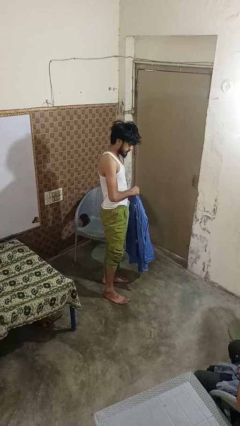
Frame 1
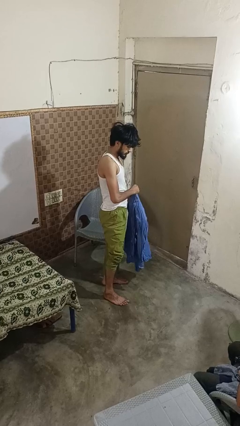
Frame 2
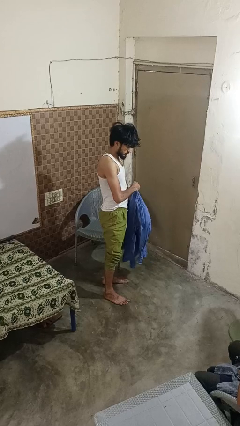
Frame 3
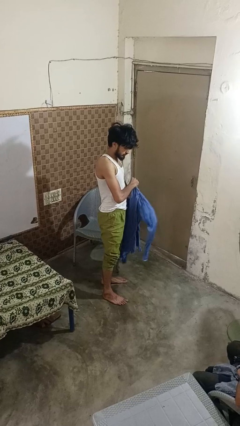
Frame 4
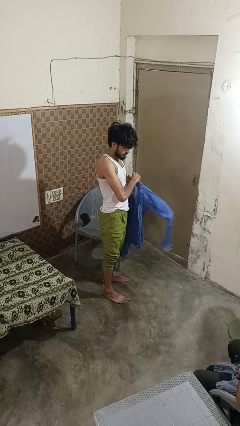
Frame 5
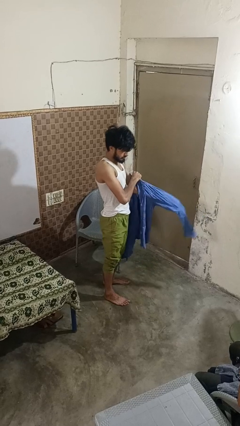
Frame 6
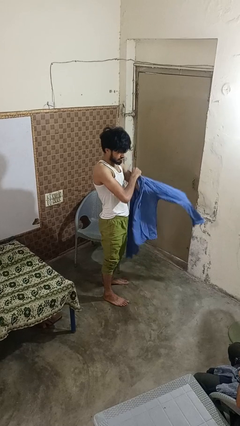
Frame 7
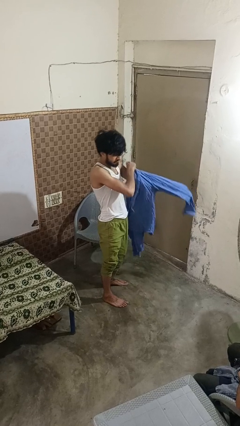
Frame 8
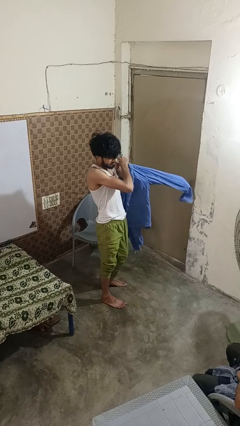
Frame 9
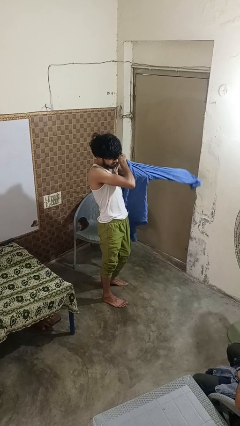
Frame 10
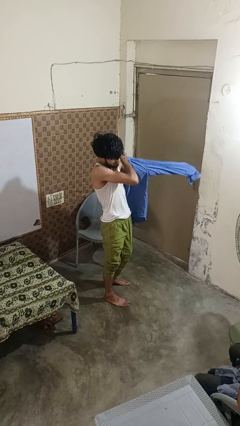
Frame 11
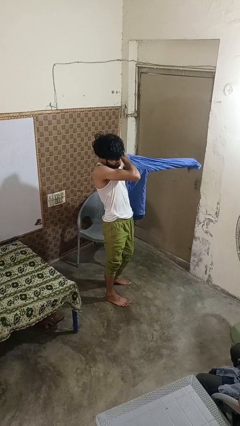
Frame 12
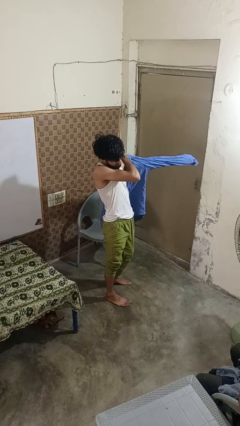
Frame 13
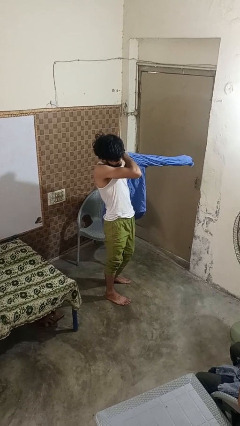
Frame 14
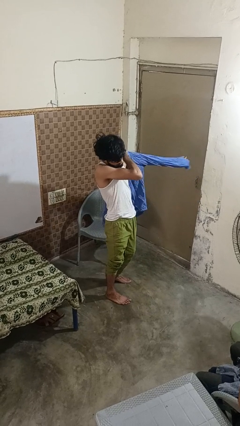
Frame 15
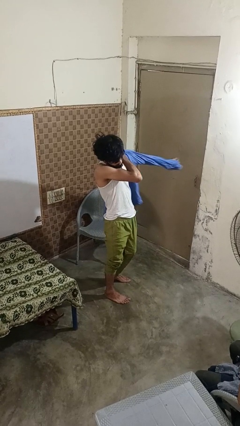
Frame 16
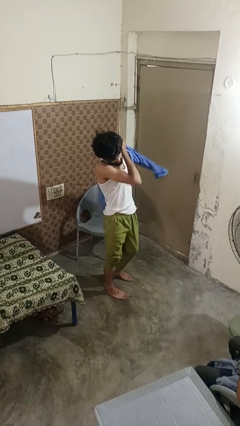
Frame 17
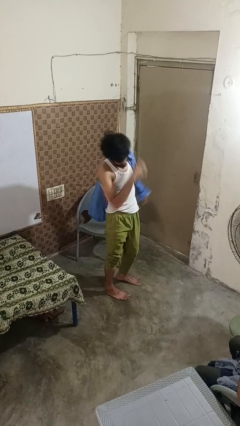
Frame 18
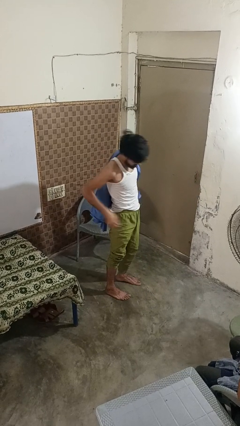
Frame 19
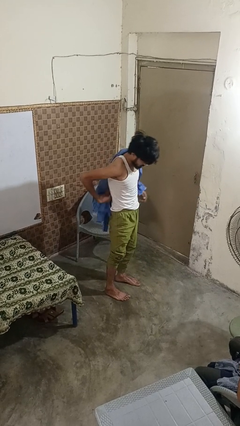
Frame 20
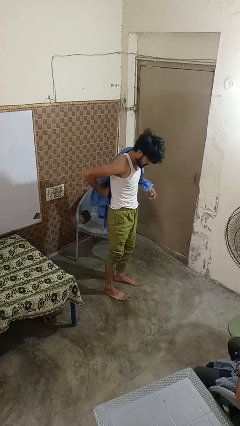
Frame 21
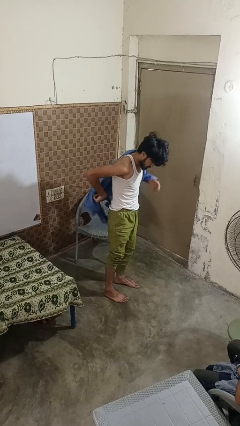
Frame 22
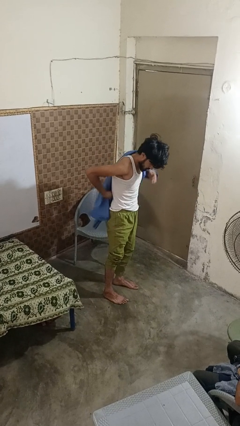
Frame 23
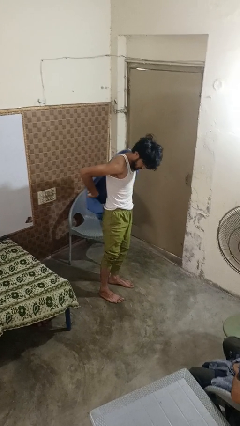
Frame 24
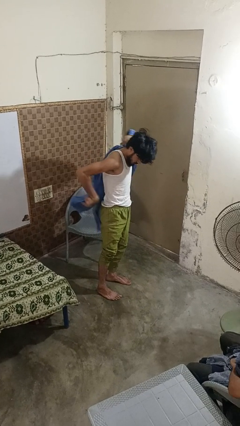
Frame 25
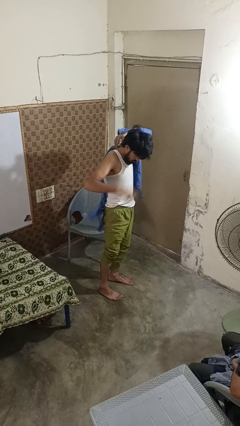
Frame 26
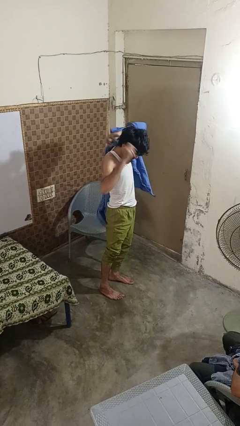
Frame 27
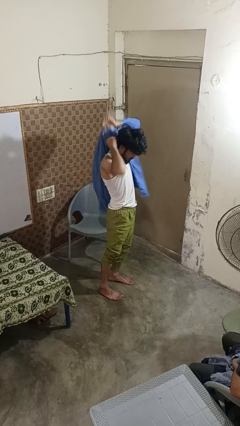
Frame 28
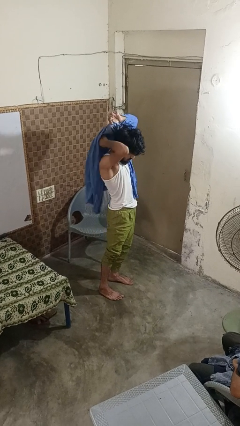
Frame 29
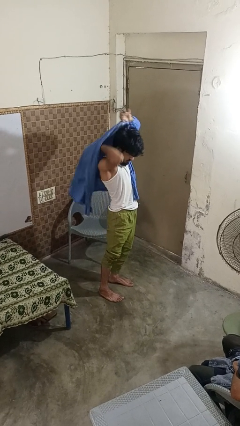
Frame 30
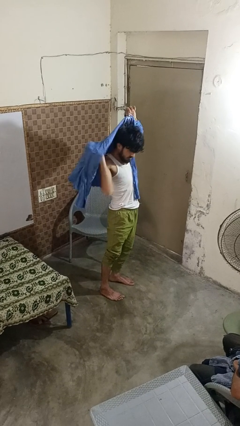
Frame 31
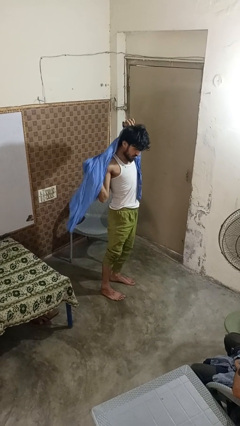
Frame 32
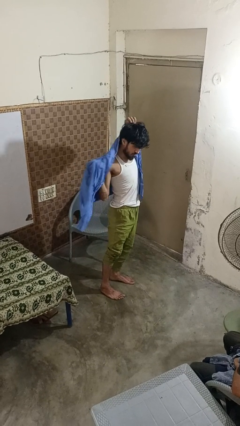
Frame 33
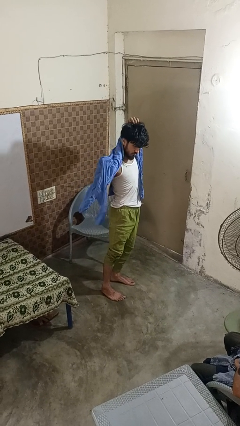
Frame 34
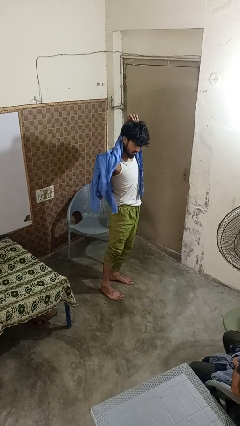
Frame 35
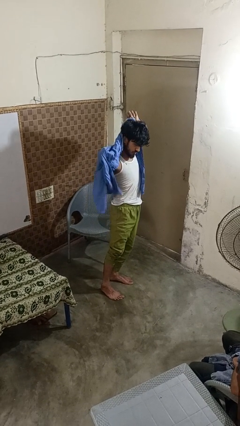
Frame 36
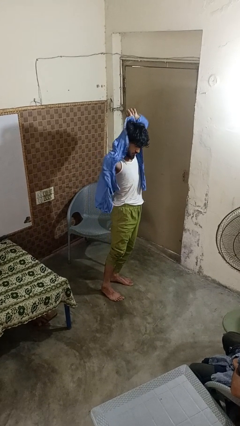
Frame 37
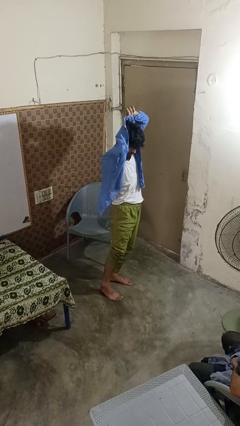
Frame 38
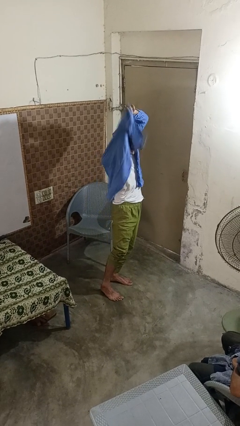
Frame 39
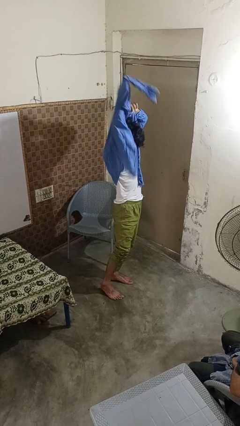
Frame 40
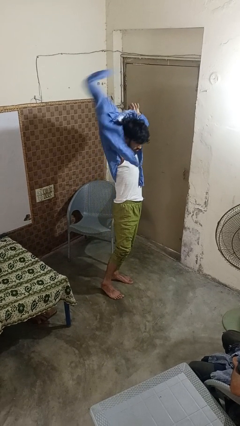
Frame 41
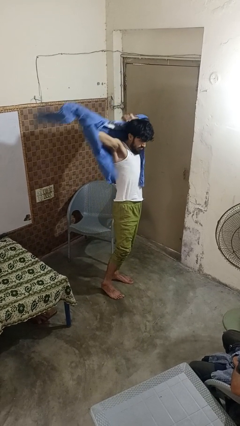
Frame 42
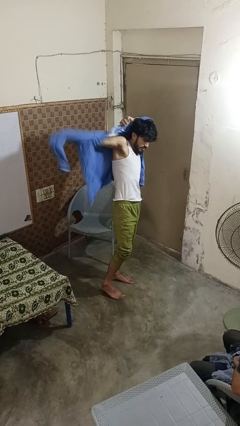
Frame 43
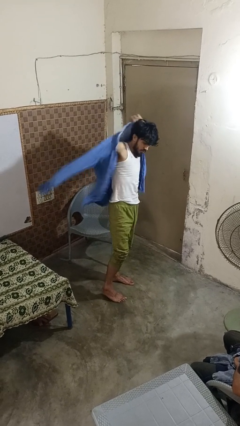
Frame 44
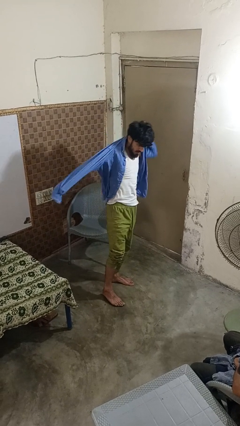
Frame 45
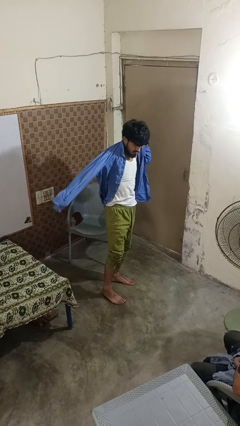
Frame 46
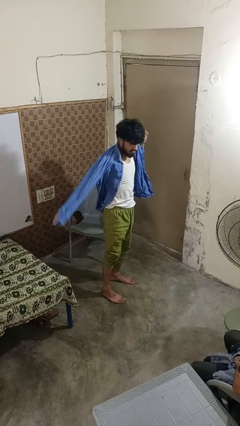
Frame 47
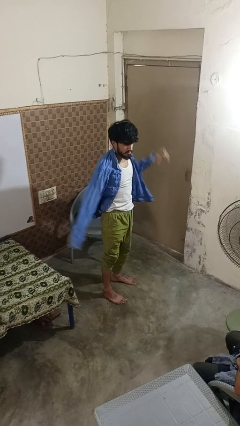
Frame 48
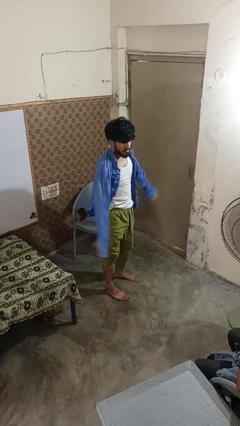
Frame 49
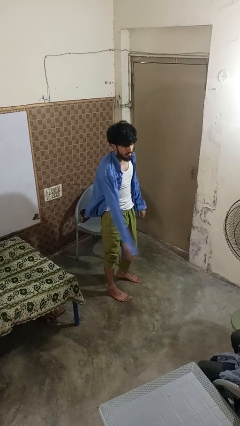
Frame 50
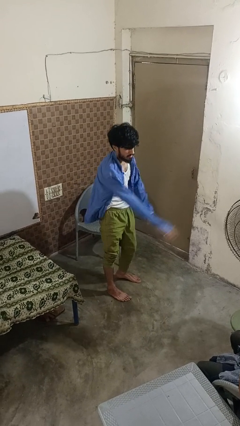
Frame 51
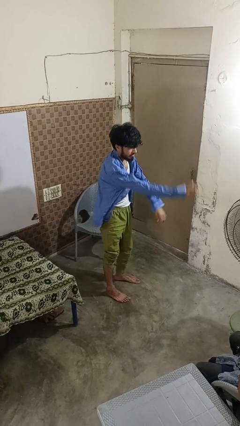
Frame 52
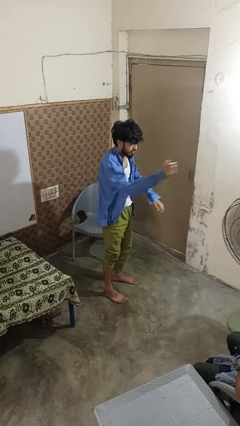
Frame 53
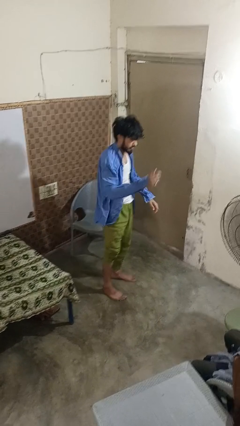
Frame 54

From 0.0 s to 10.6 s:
person puts on shirt

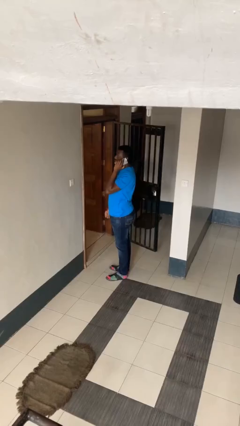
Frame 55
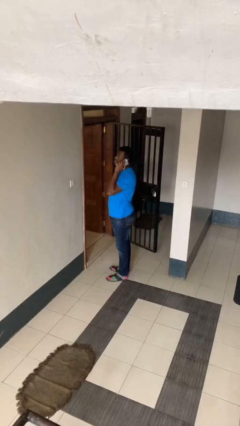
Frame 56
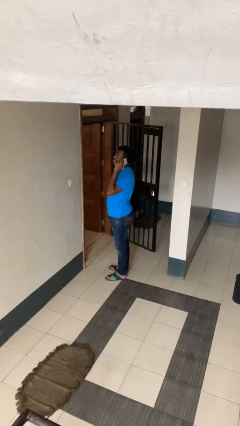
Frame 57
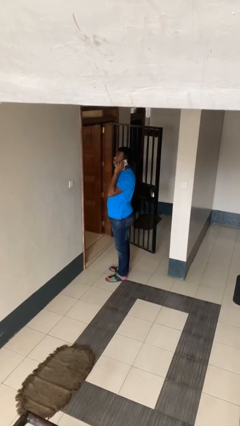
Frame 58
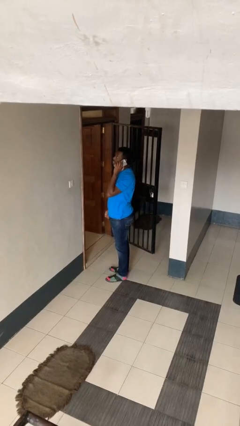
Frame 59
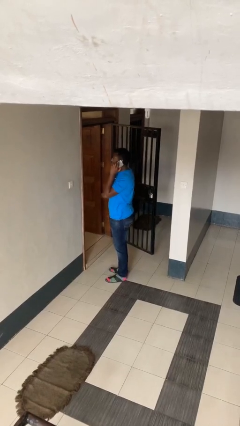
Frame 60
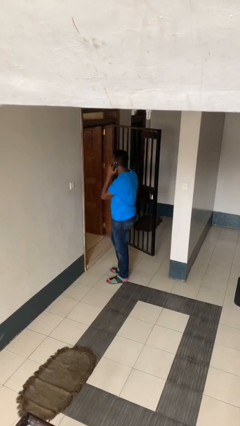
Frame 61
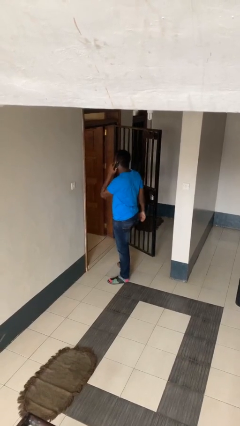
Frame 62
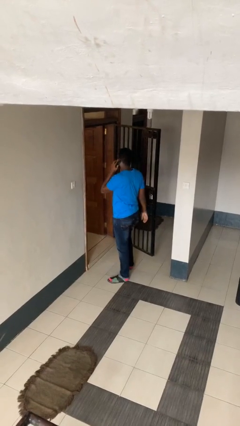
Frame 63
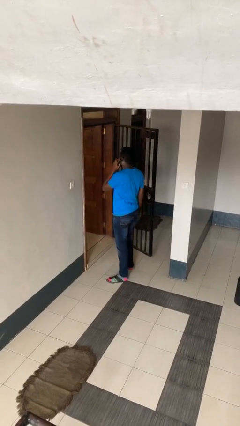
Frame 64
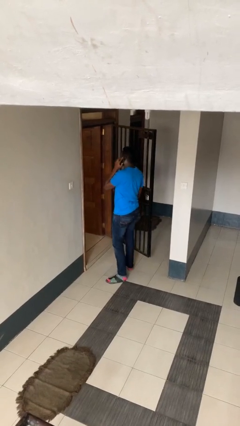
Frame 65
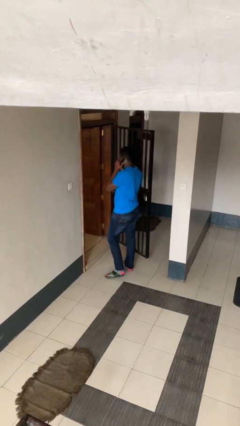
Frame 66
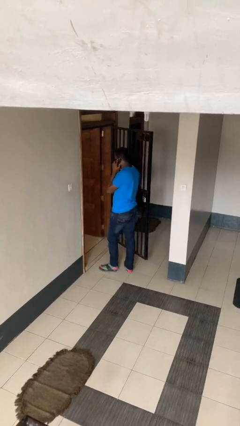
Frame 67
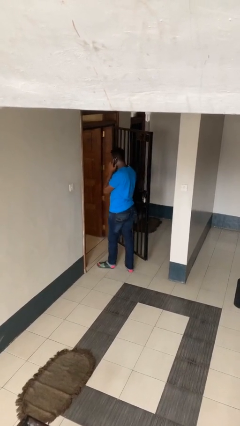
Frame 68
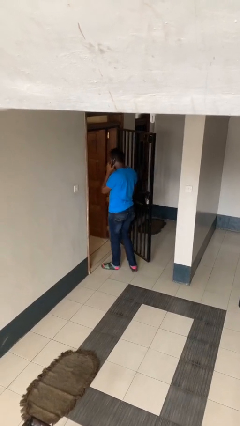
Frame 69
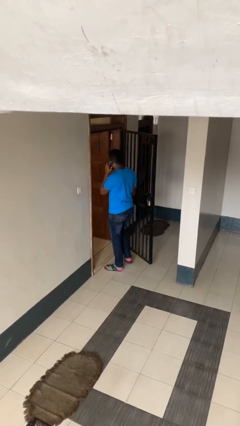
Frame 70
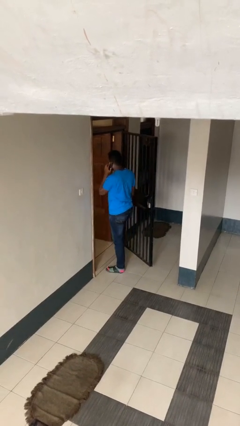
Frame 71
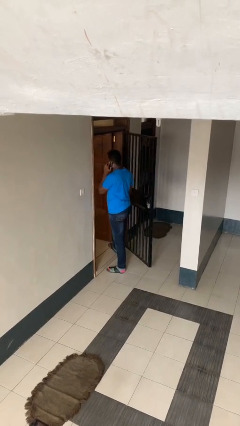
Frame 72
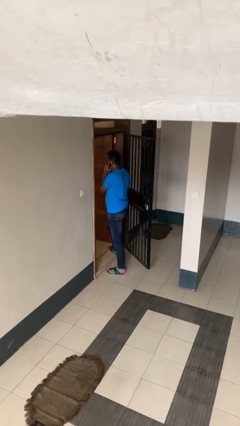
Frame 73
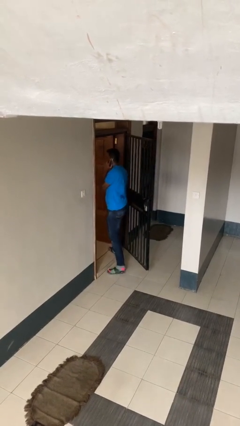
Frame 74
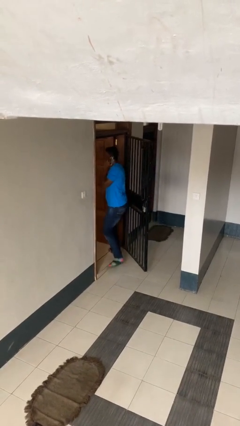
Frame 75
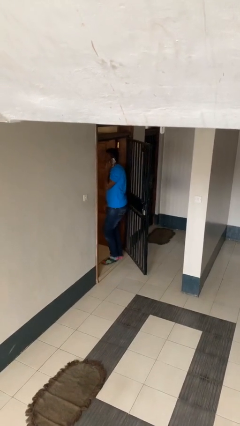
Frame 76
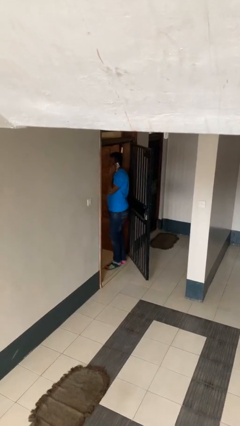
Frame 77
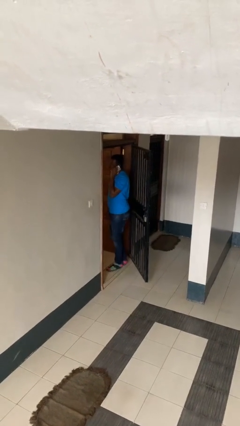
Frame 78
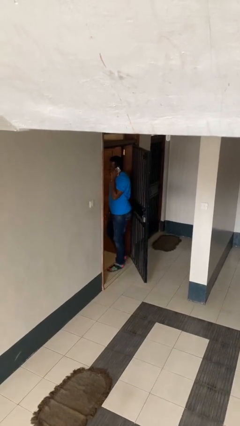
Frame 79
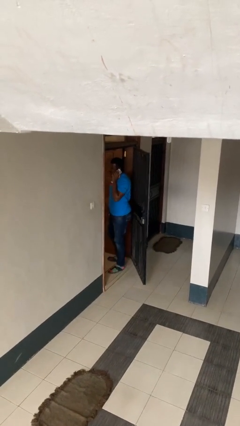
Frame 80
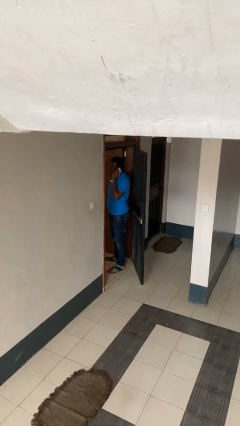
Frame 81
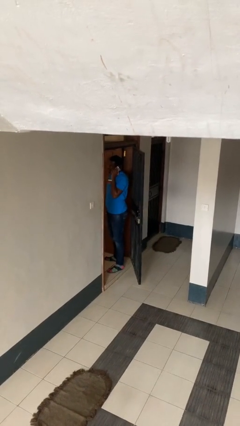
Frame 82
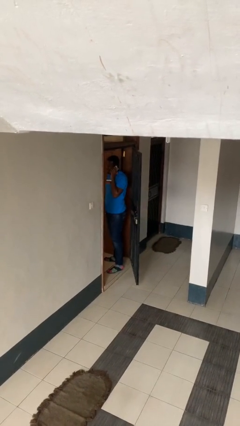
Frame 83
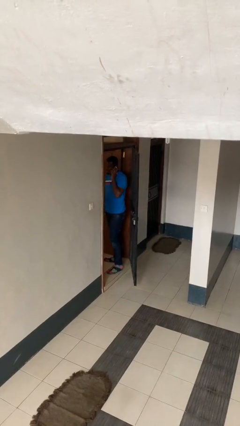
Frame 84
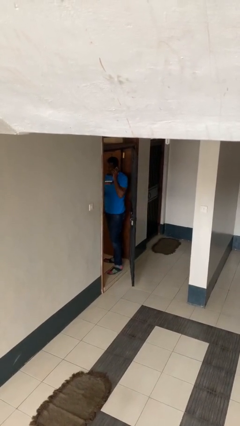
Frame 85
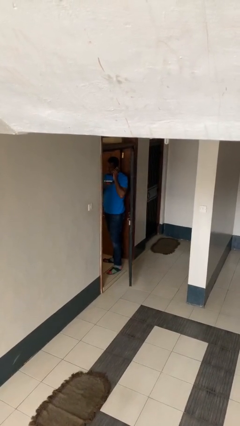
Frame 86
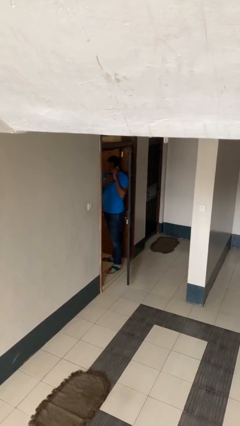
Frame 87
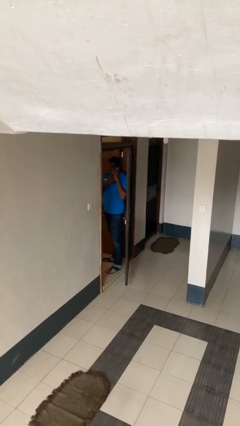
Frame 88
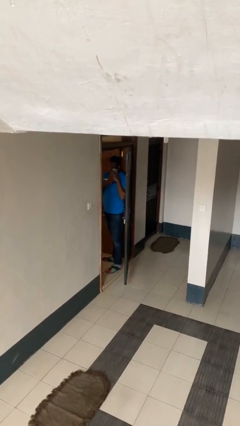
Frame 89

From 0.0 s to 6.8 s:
person exits scene through structure

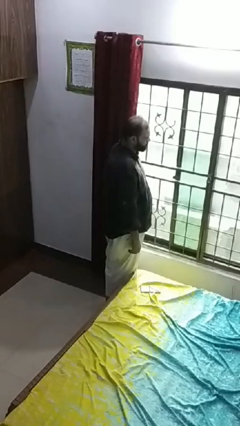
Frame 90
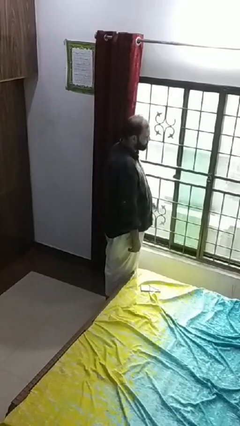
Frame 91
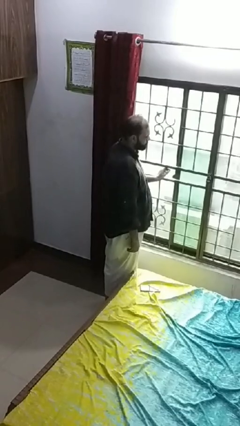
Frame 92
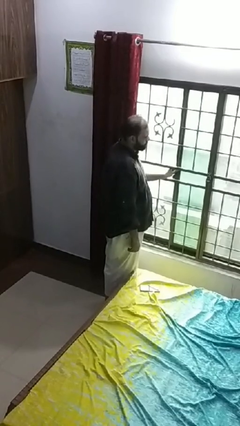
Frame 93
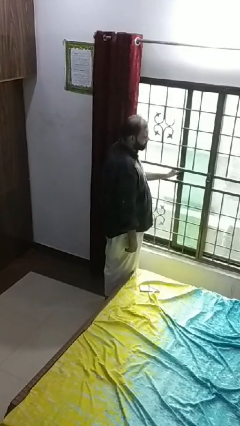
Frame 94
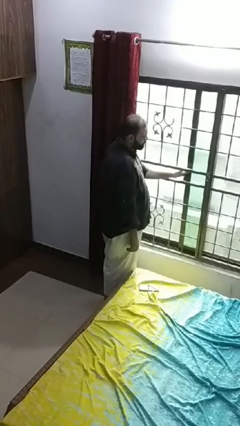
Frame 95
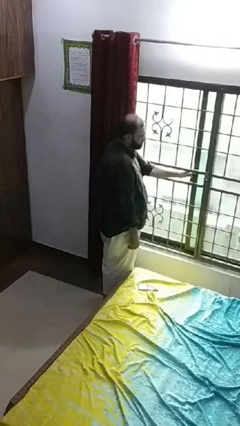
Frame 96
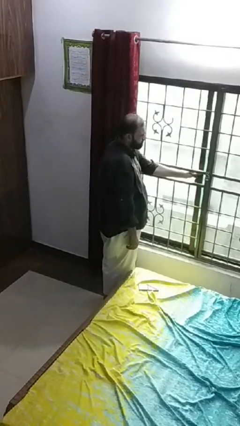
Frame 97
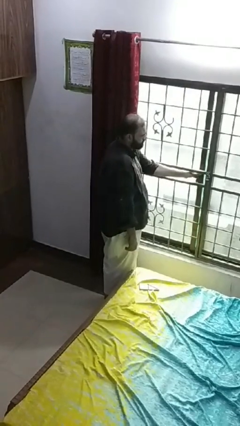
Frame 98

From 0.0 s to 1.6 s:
person closes home window
